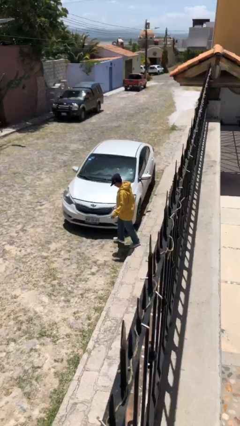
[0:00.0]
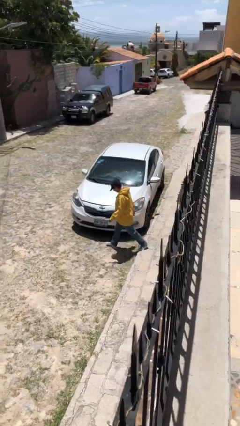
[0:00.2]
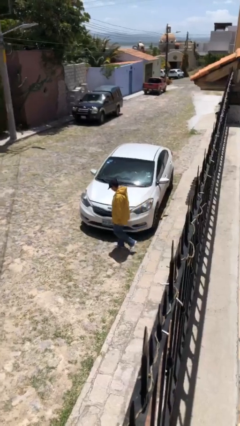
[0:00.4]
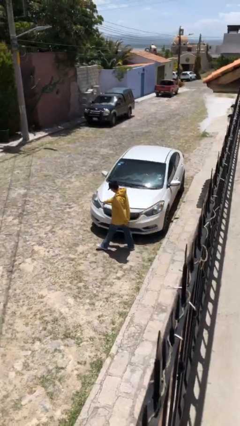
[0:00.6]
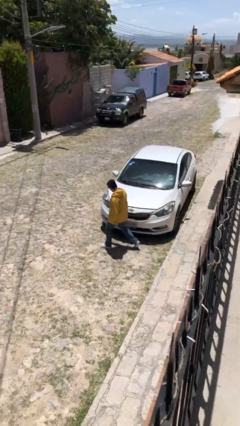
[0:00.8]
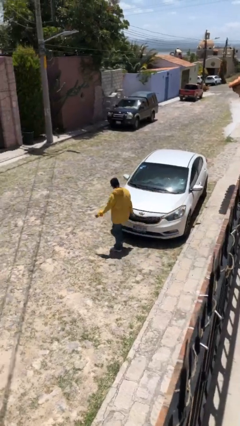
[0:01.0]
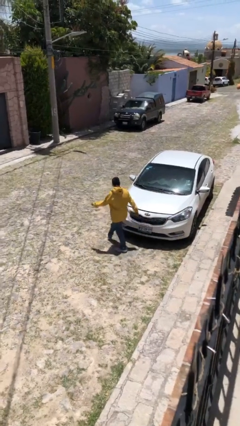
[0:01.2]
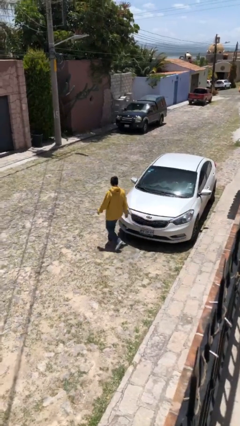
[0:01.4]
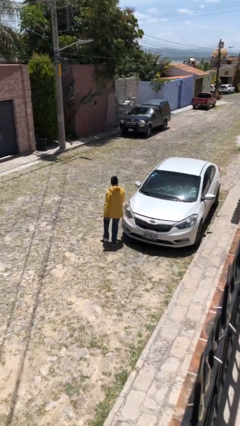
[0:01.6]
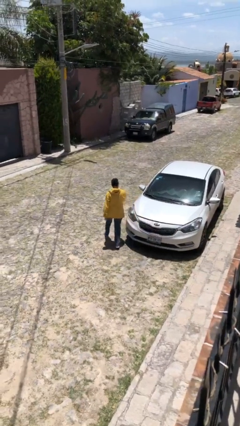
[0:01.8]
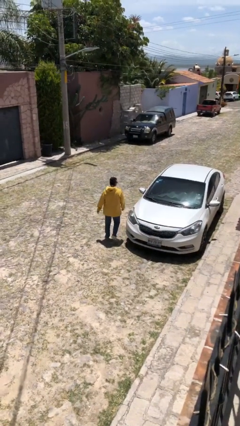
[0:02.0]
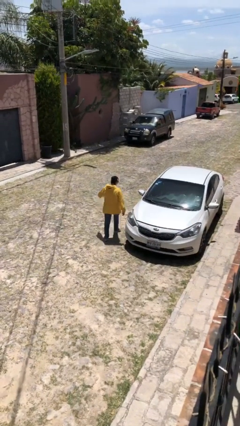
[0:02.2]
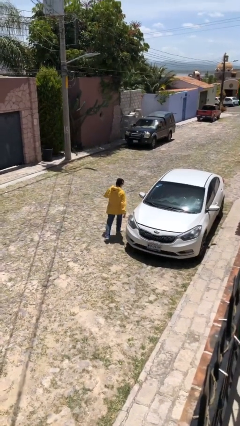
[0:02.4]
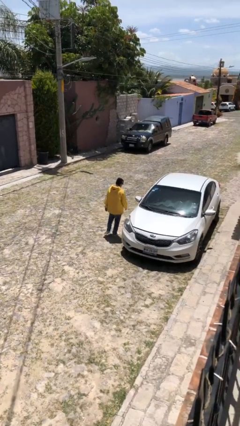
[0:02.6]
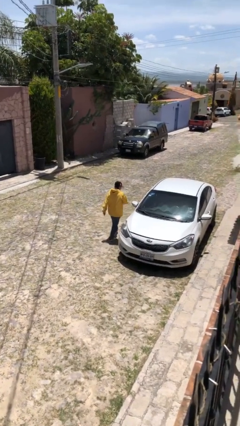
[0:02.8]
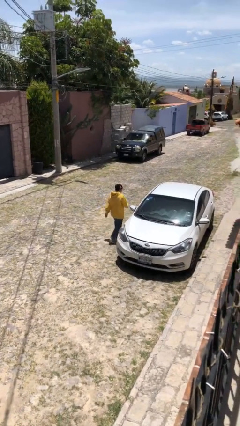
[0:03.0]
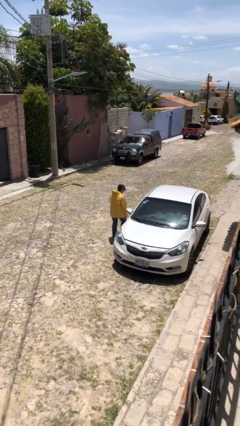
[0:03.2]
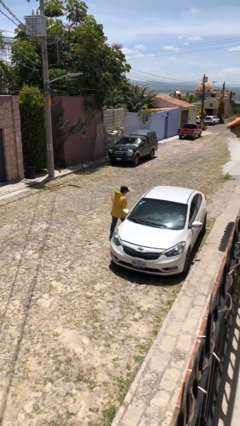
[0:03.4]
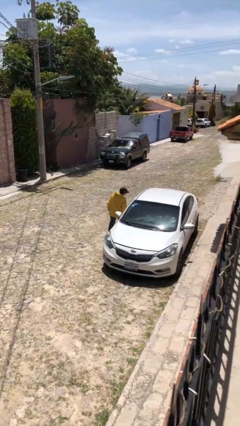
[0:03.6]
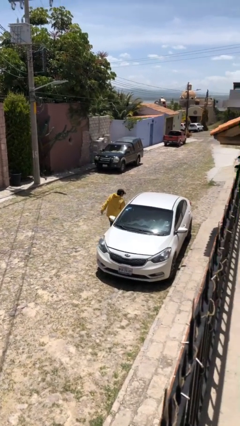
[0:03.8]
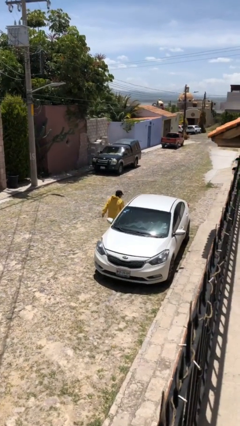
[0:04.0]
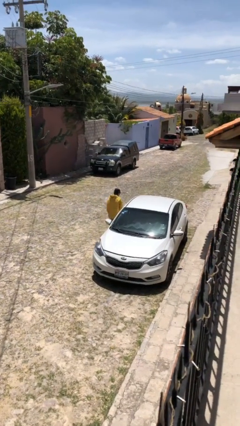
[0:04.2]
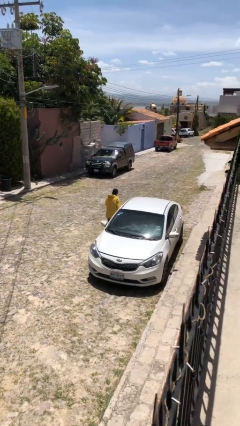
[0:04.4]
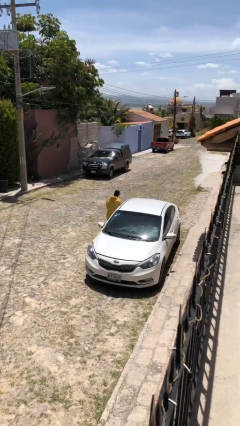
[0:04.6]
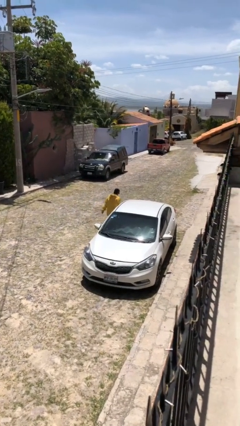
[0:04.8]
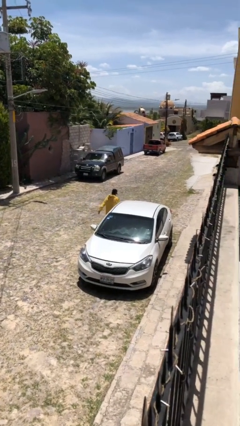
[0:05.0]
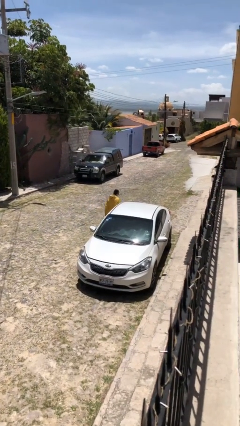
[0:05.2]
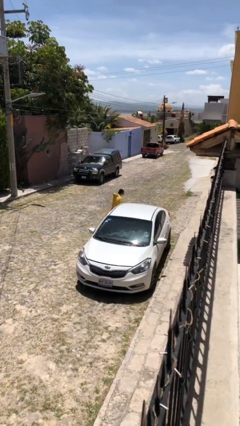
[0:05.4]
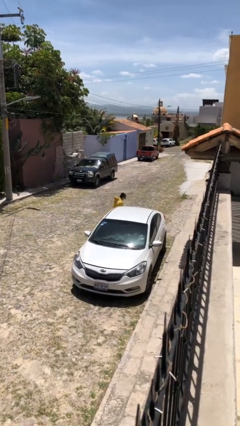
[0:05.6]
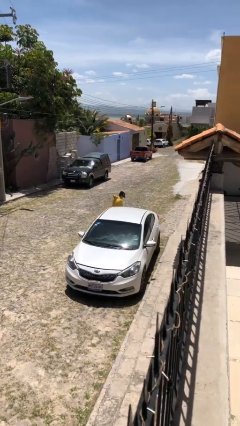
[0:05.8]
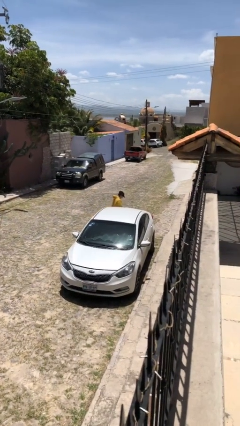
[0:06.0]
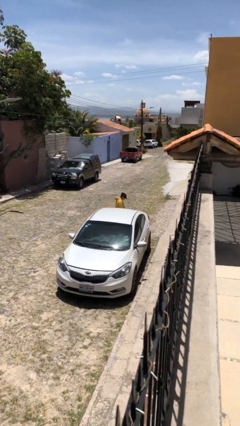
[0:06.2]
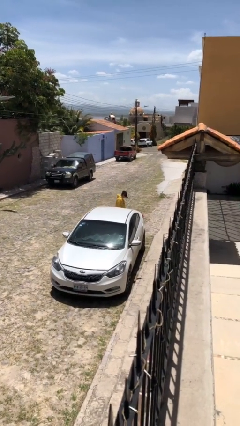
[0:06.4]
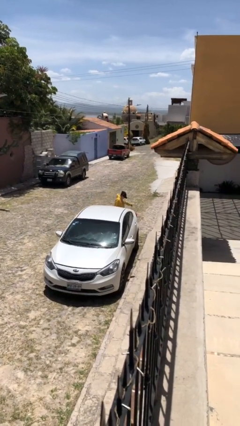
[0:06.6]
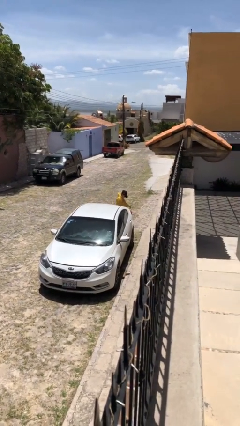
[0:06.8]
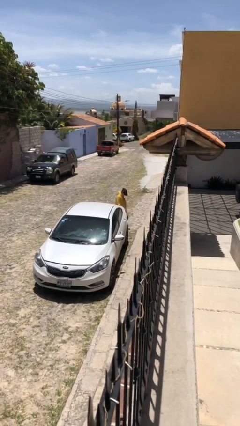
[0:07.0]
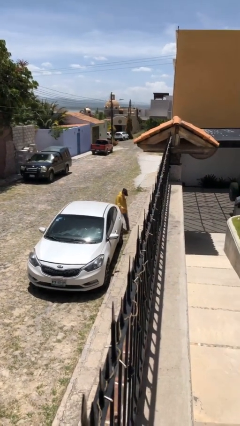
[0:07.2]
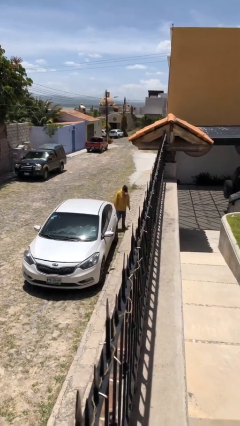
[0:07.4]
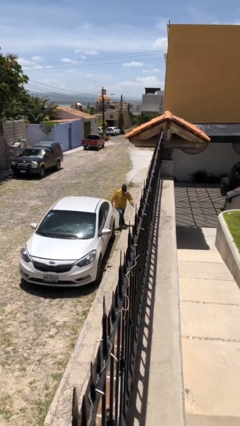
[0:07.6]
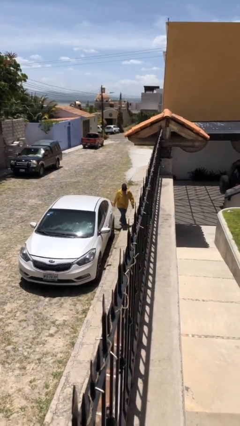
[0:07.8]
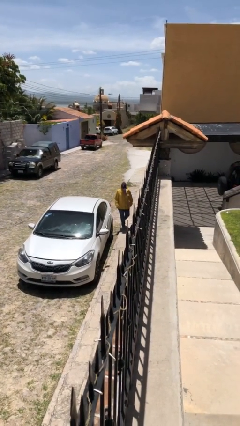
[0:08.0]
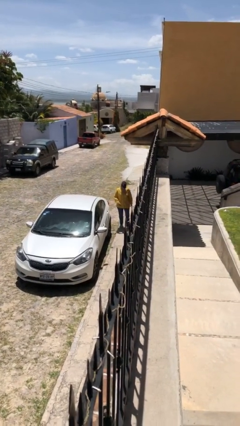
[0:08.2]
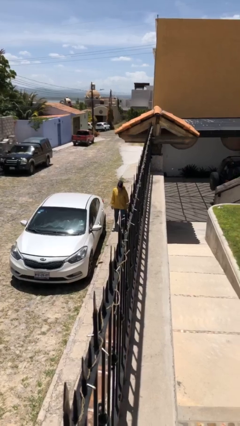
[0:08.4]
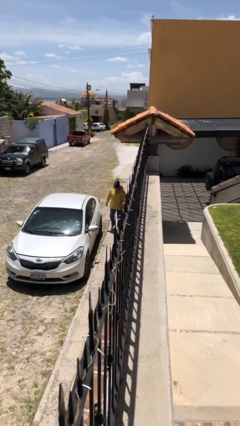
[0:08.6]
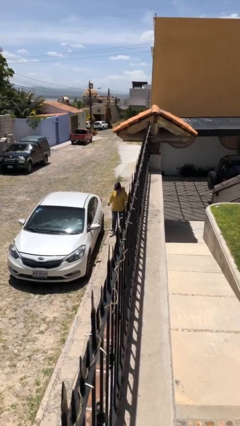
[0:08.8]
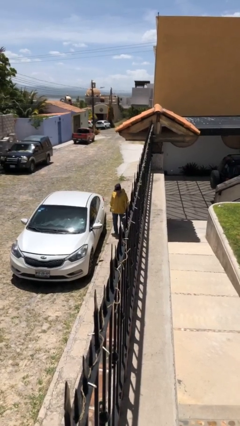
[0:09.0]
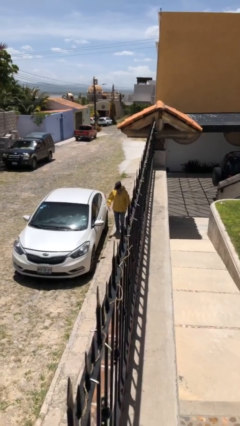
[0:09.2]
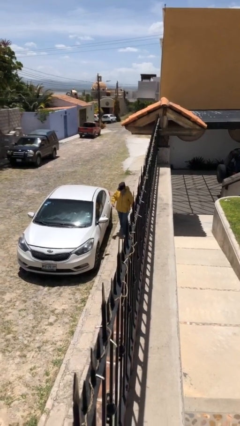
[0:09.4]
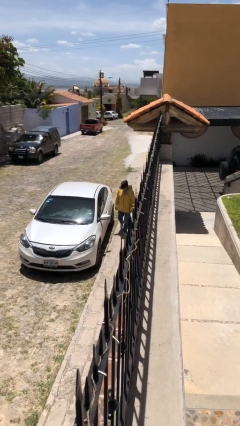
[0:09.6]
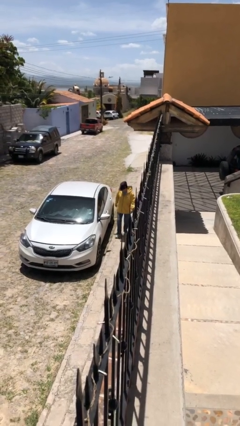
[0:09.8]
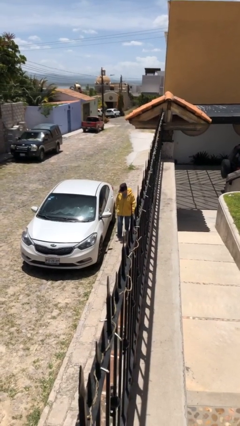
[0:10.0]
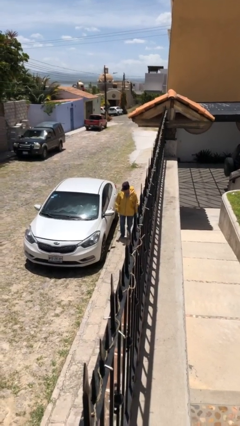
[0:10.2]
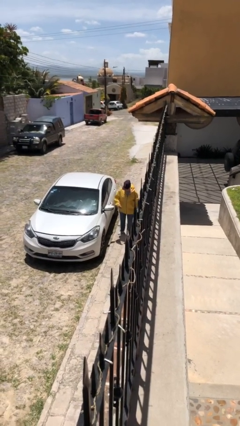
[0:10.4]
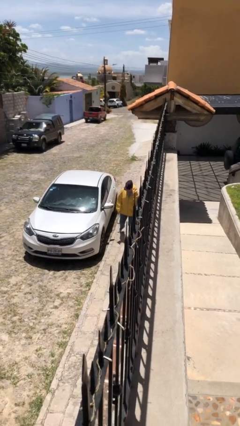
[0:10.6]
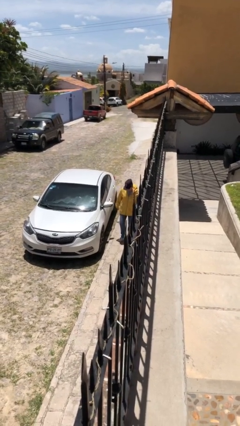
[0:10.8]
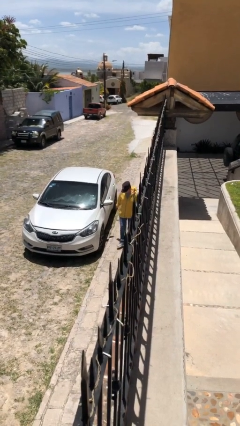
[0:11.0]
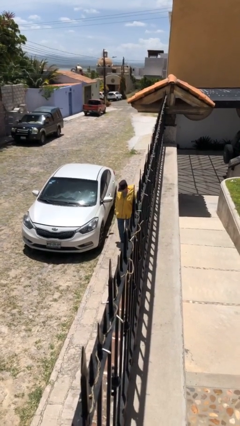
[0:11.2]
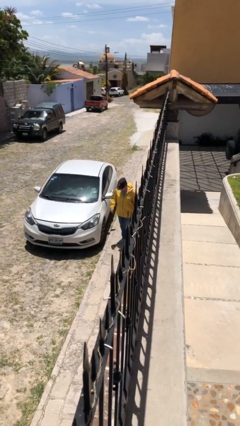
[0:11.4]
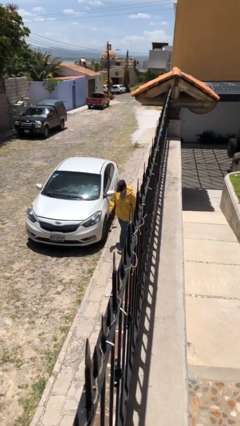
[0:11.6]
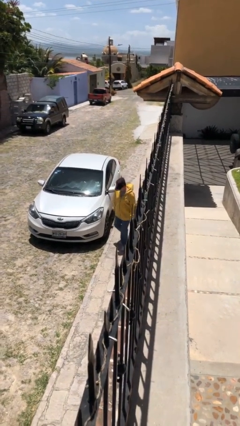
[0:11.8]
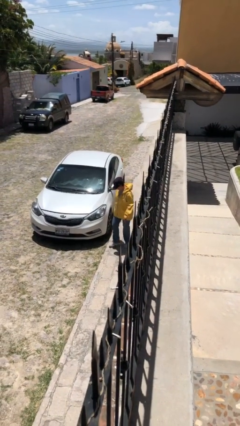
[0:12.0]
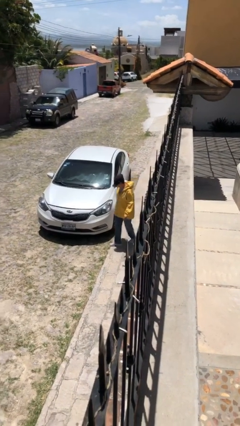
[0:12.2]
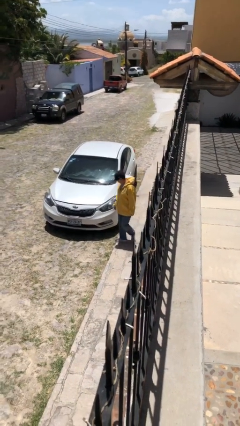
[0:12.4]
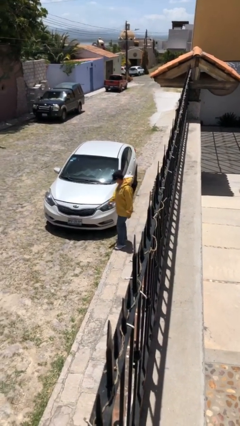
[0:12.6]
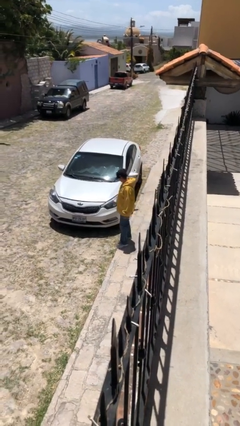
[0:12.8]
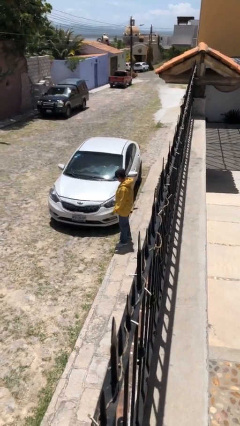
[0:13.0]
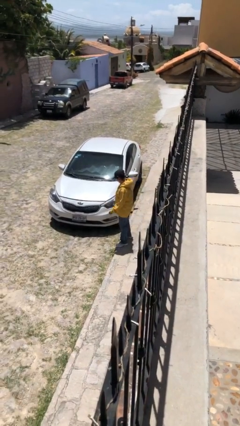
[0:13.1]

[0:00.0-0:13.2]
person walks around car

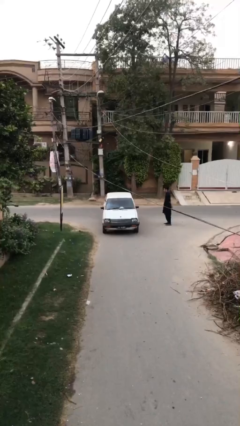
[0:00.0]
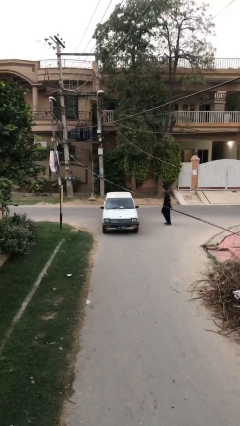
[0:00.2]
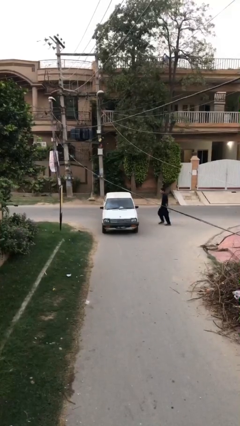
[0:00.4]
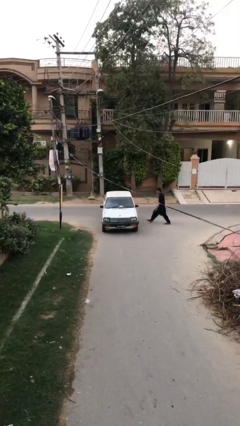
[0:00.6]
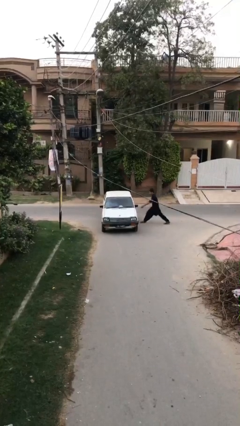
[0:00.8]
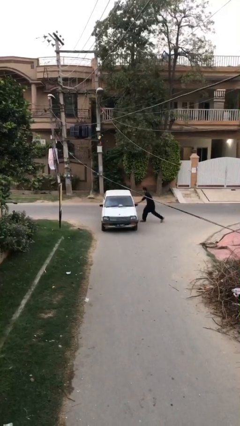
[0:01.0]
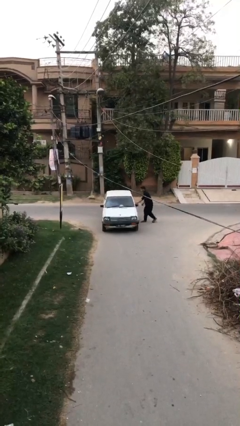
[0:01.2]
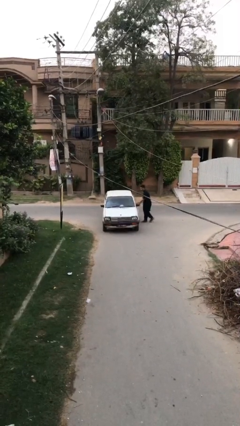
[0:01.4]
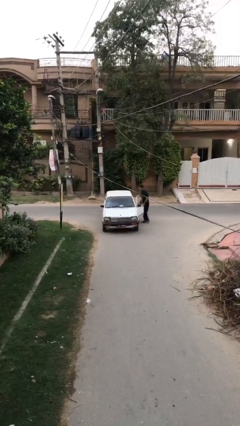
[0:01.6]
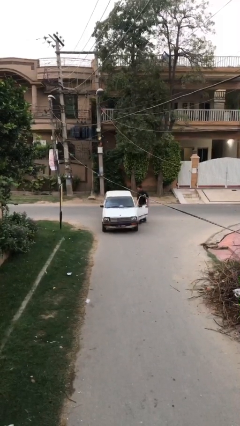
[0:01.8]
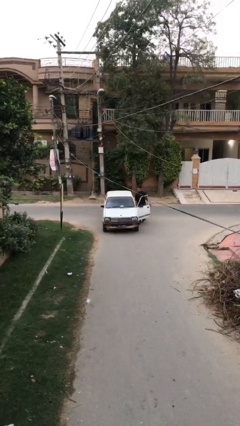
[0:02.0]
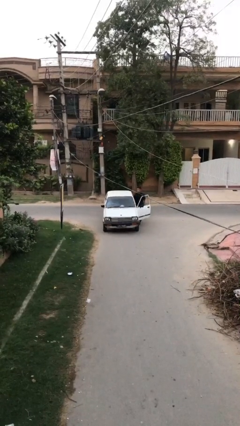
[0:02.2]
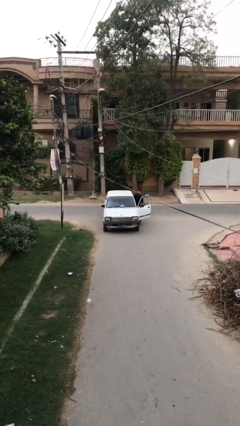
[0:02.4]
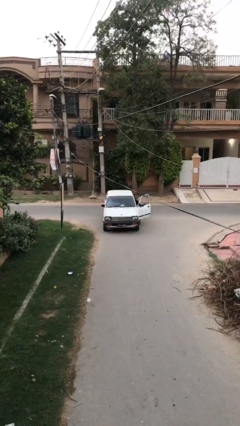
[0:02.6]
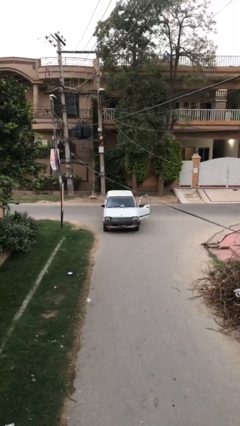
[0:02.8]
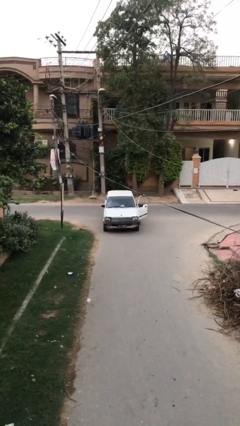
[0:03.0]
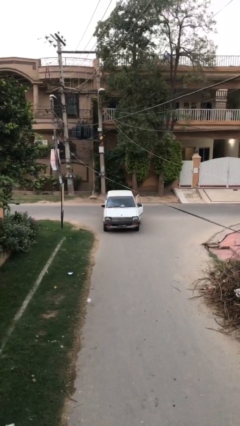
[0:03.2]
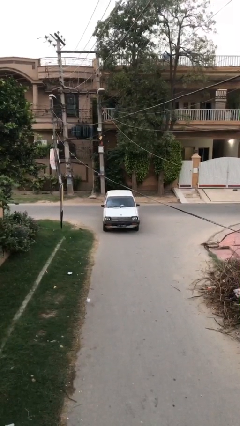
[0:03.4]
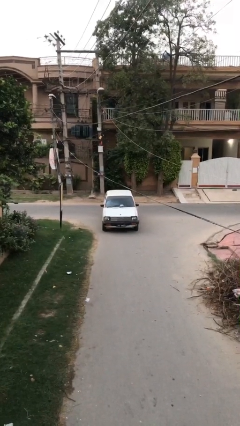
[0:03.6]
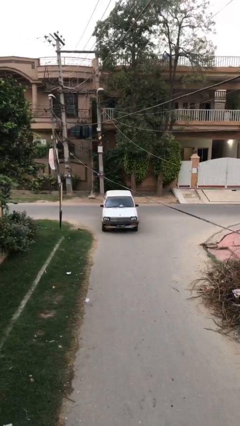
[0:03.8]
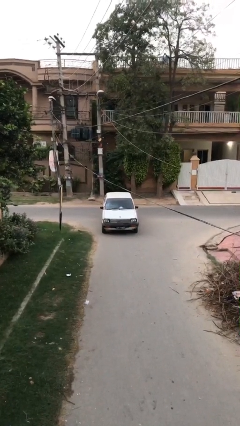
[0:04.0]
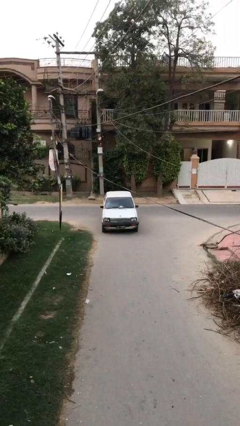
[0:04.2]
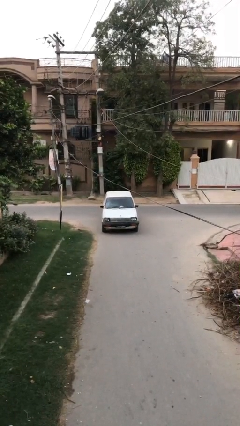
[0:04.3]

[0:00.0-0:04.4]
car picks up person

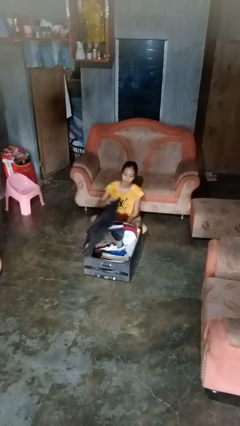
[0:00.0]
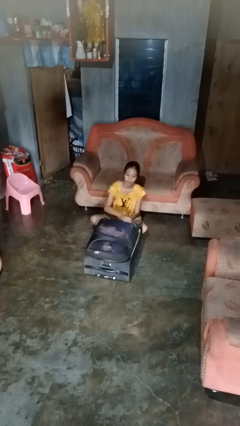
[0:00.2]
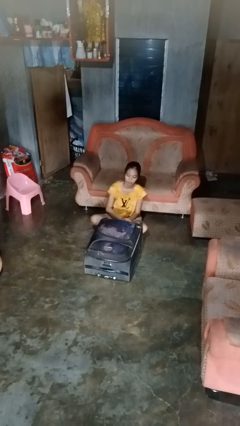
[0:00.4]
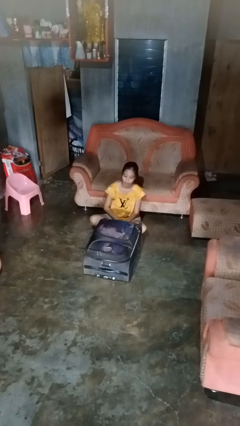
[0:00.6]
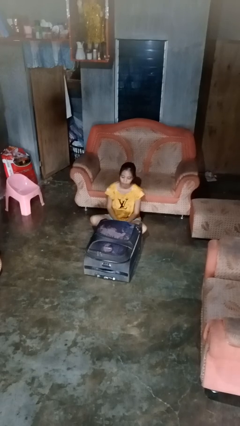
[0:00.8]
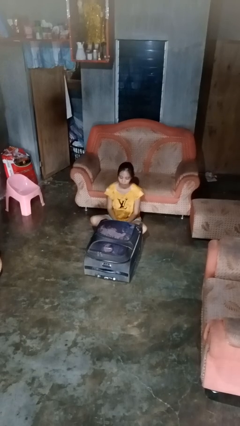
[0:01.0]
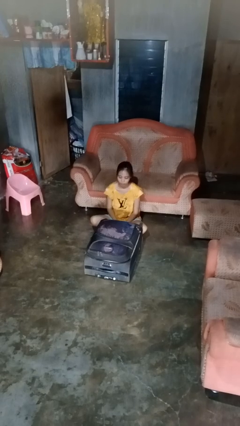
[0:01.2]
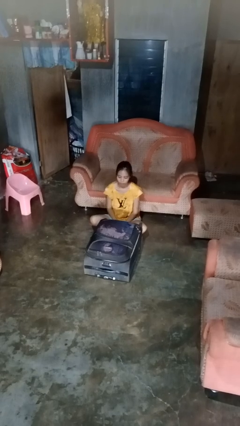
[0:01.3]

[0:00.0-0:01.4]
person closes suitcase
